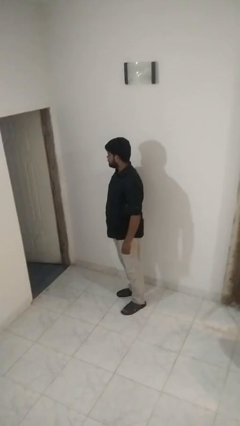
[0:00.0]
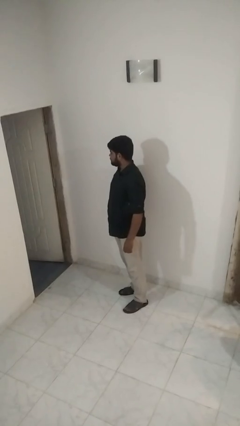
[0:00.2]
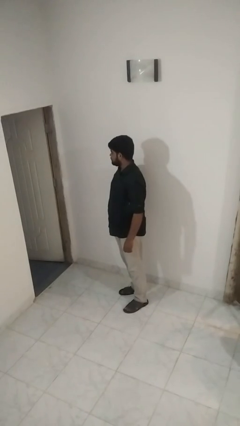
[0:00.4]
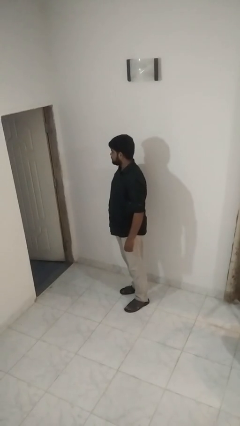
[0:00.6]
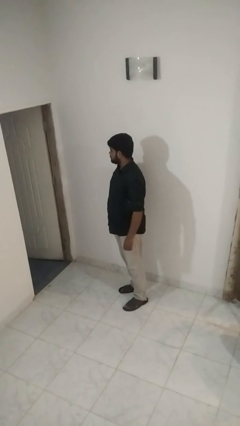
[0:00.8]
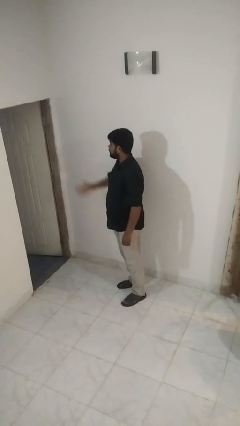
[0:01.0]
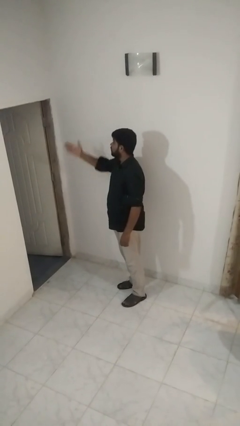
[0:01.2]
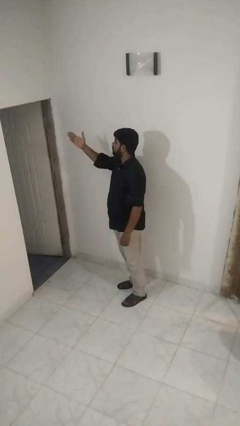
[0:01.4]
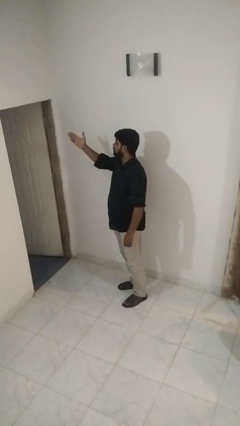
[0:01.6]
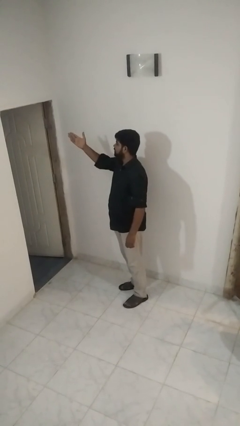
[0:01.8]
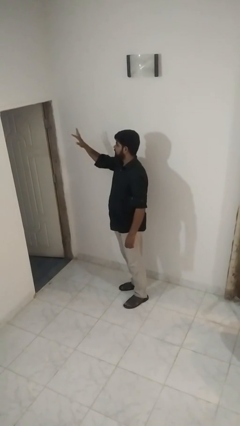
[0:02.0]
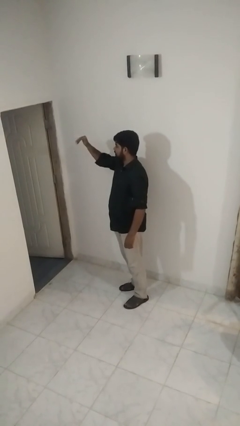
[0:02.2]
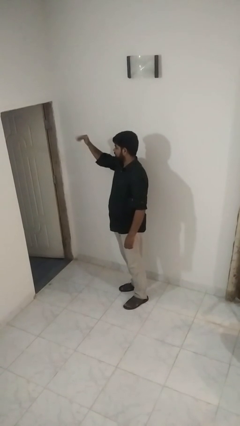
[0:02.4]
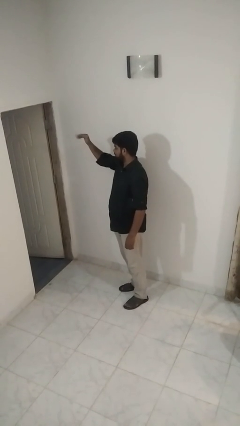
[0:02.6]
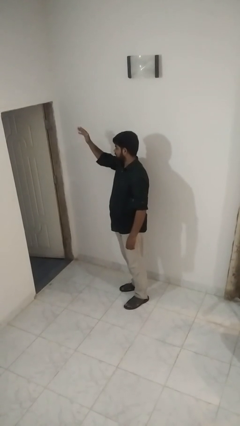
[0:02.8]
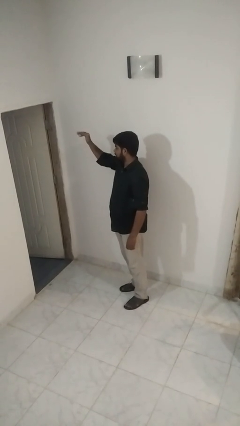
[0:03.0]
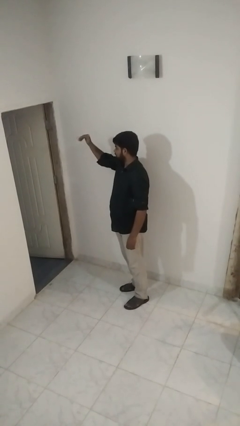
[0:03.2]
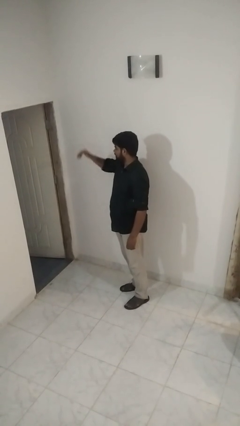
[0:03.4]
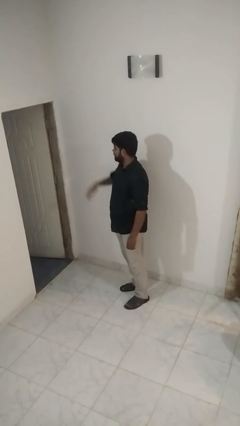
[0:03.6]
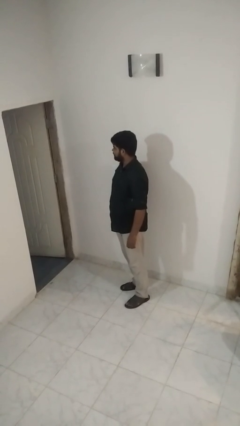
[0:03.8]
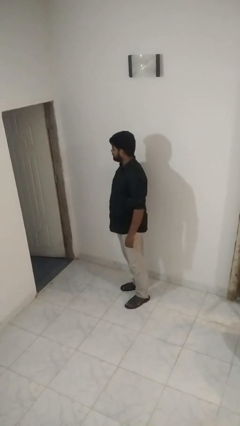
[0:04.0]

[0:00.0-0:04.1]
person gestures come here

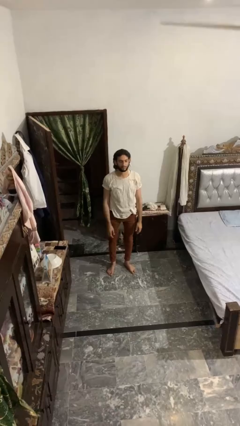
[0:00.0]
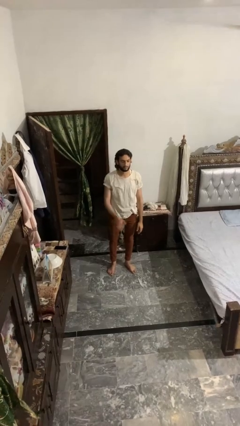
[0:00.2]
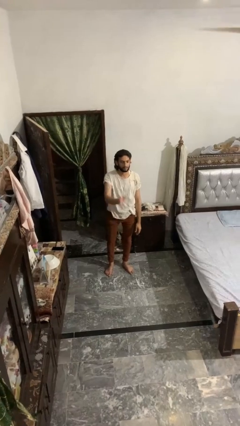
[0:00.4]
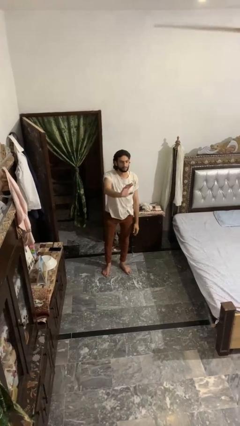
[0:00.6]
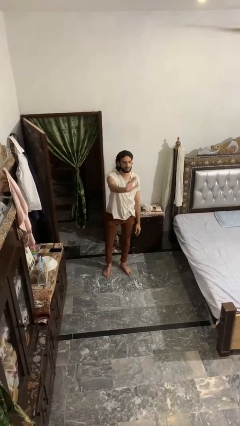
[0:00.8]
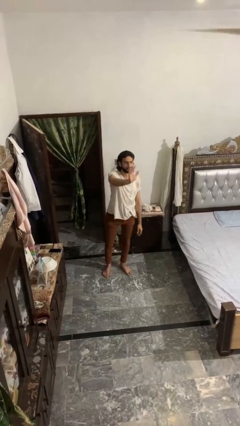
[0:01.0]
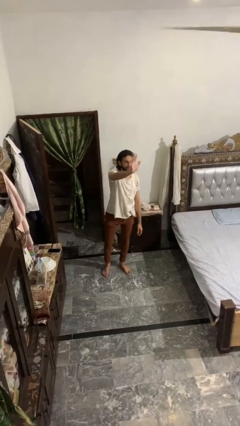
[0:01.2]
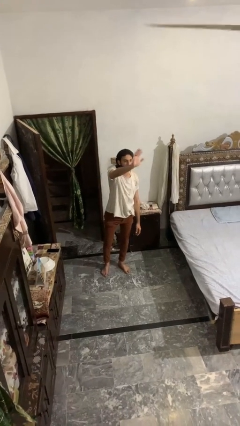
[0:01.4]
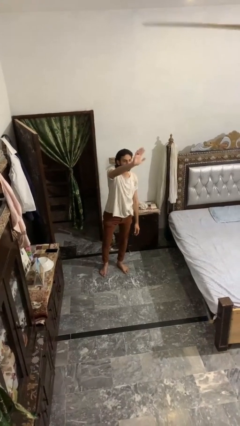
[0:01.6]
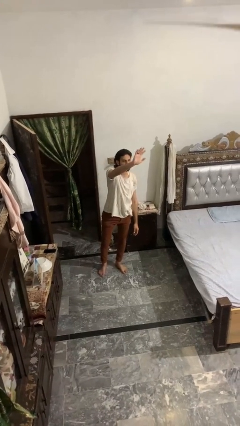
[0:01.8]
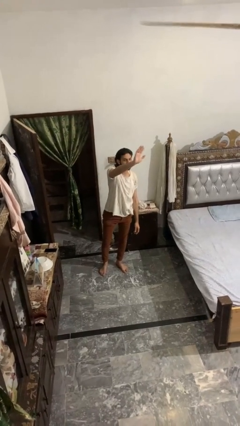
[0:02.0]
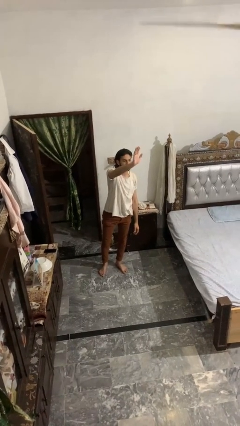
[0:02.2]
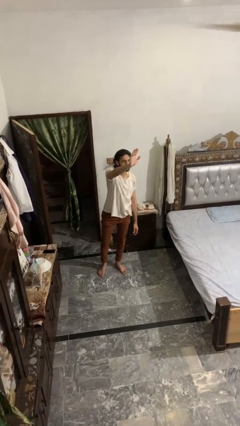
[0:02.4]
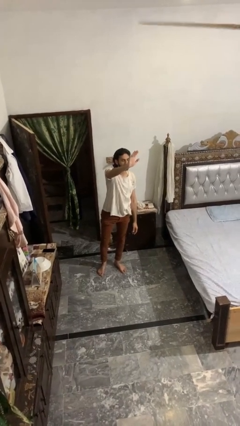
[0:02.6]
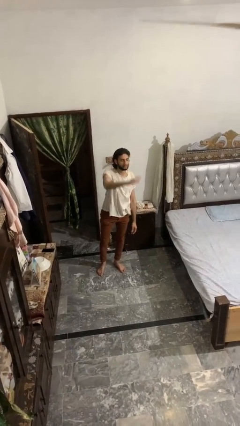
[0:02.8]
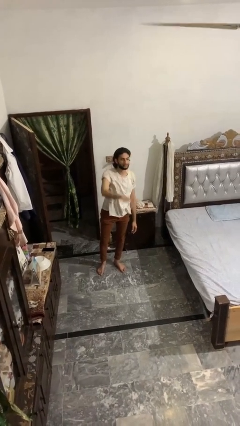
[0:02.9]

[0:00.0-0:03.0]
person waves at person

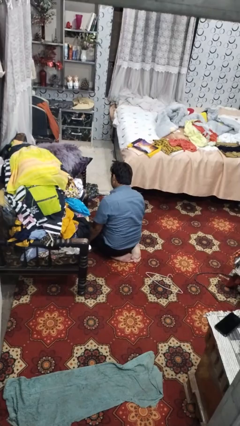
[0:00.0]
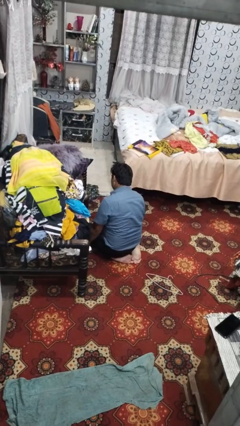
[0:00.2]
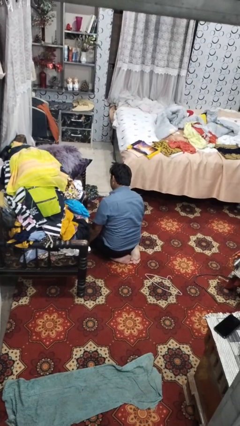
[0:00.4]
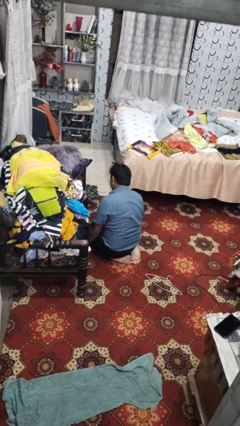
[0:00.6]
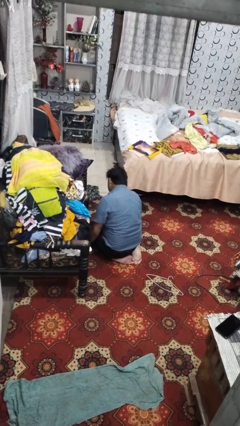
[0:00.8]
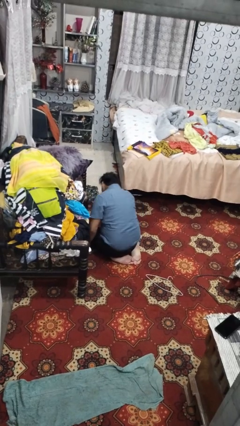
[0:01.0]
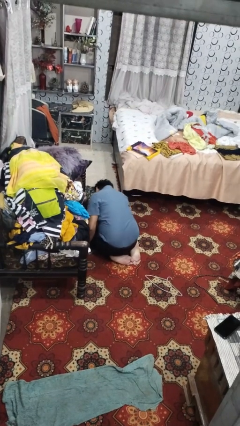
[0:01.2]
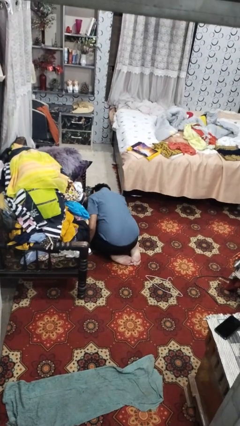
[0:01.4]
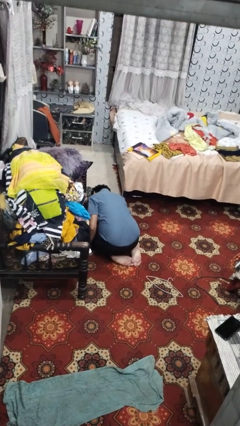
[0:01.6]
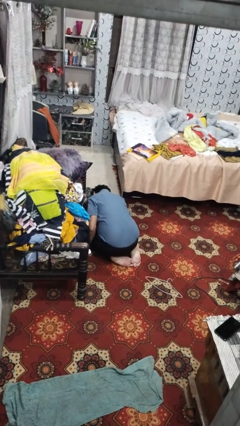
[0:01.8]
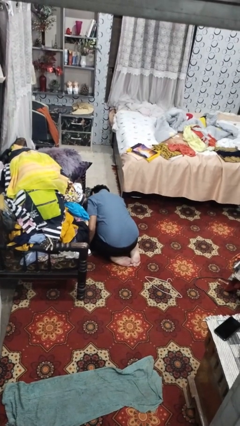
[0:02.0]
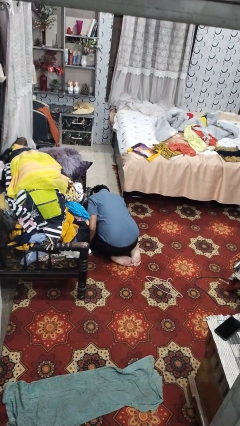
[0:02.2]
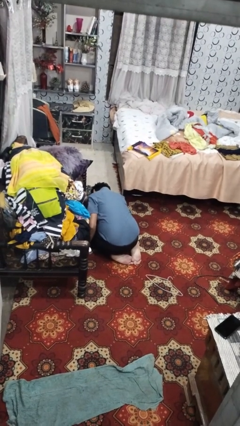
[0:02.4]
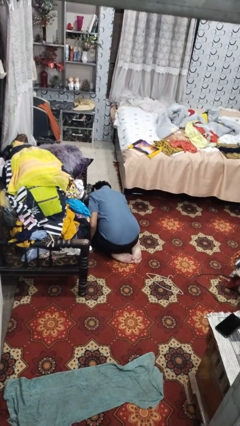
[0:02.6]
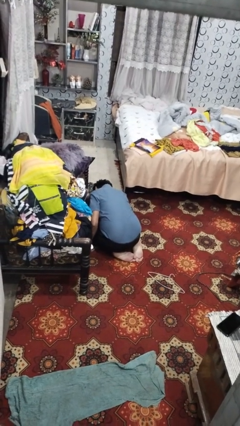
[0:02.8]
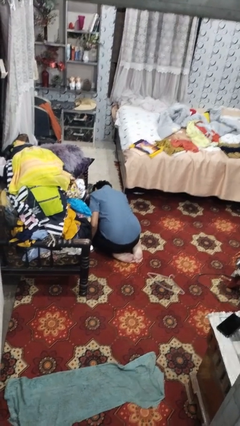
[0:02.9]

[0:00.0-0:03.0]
person searches under couch

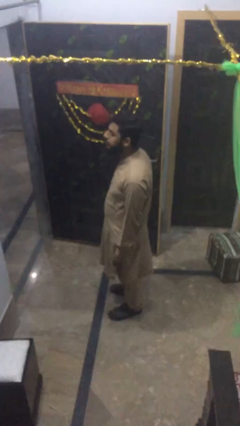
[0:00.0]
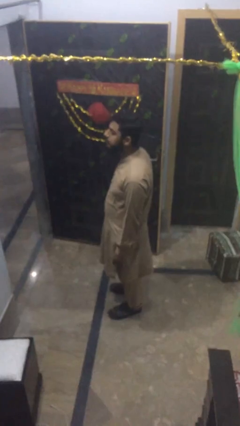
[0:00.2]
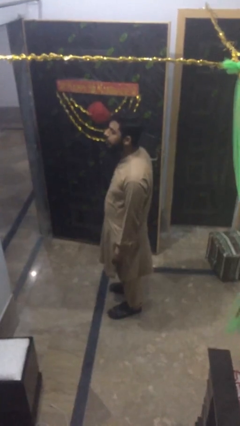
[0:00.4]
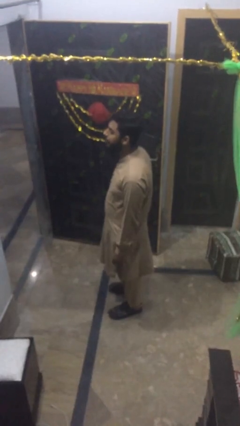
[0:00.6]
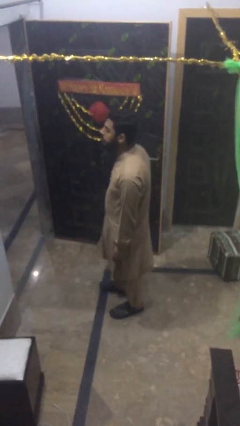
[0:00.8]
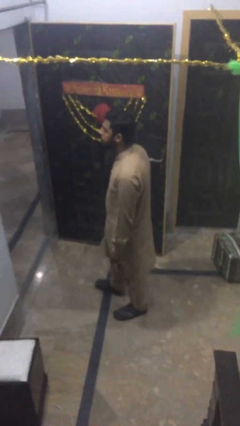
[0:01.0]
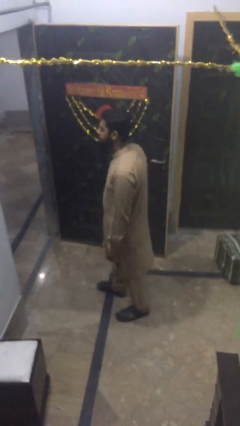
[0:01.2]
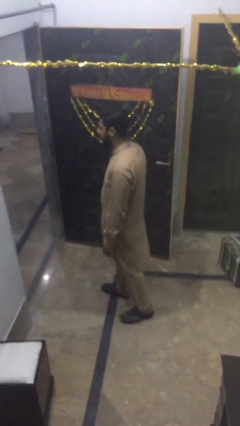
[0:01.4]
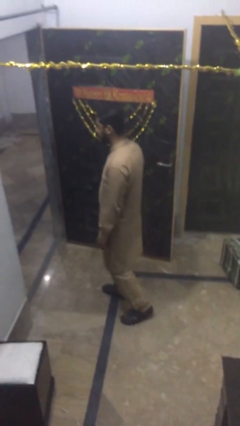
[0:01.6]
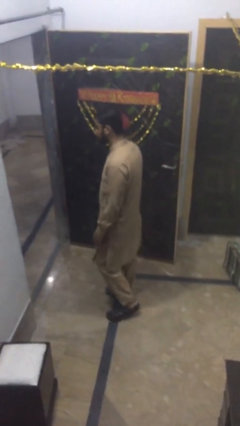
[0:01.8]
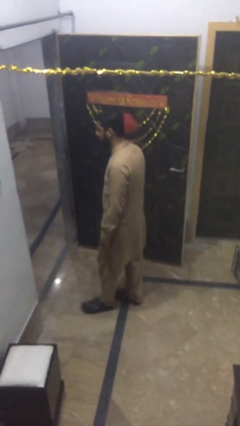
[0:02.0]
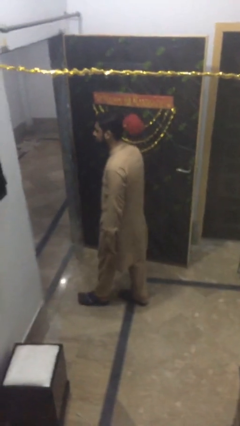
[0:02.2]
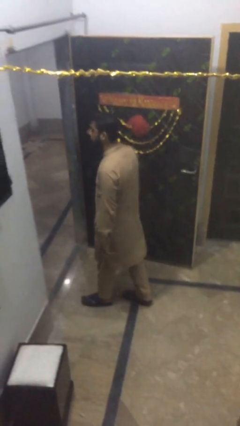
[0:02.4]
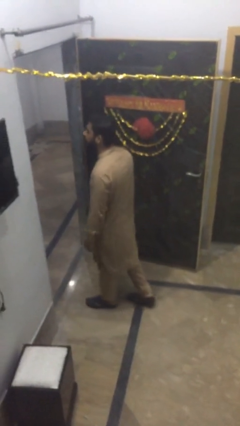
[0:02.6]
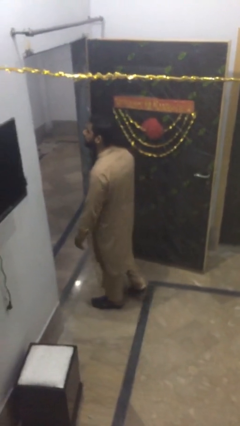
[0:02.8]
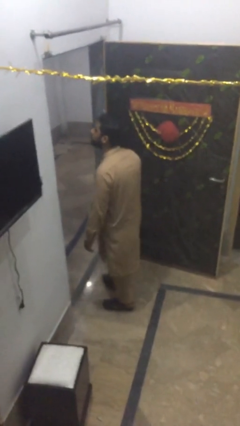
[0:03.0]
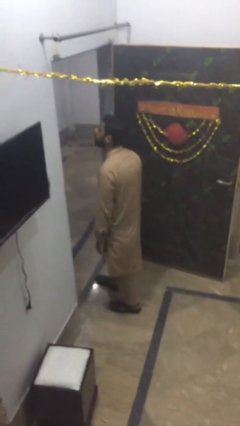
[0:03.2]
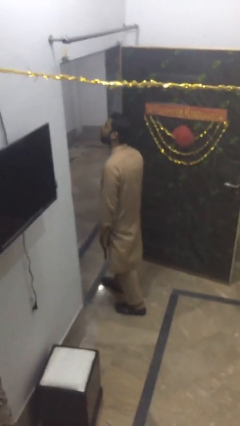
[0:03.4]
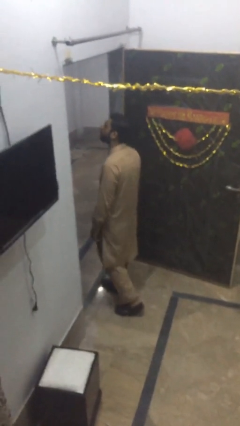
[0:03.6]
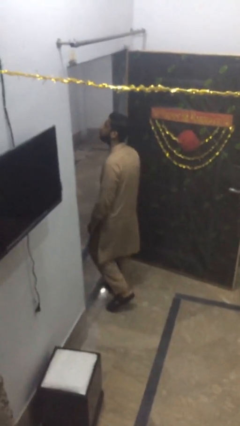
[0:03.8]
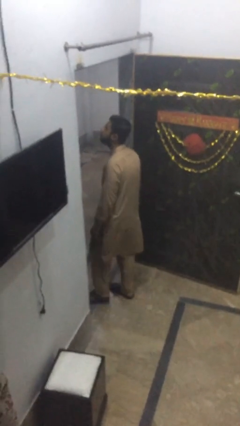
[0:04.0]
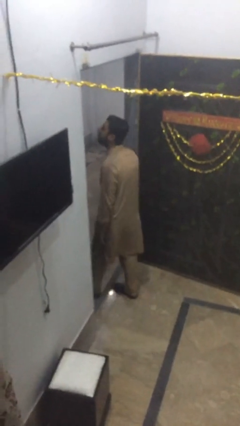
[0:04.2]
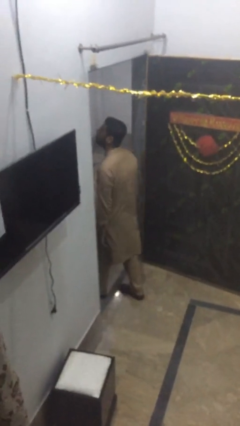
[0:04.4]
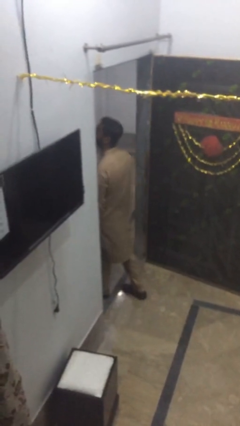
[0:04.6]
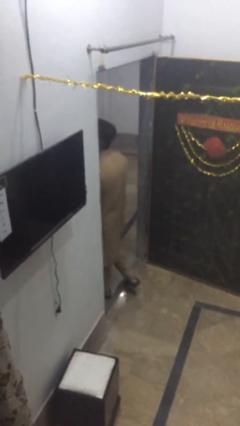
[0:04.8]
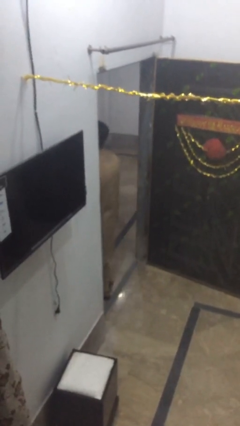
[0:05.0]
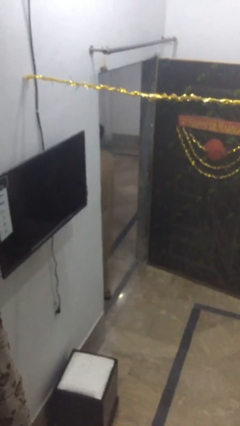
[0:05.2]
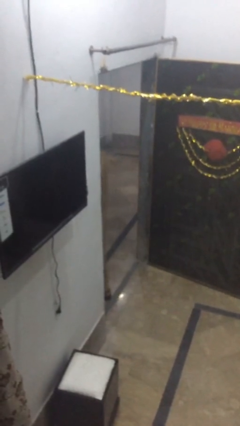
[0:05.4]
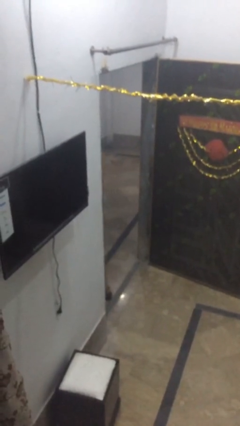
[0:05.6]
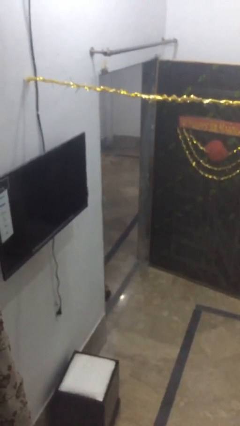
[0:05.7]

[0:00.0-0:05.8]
person exits scene through structure

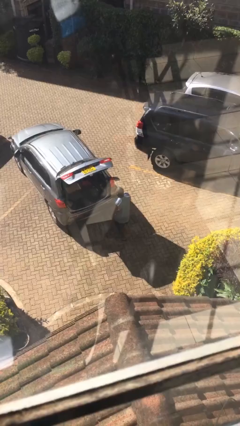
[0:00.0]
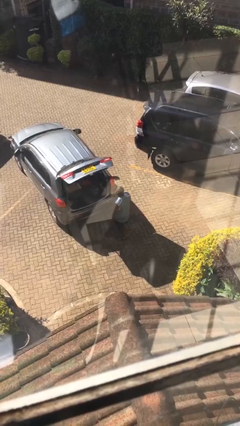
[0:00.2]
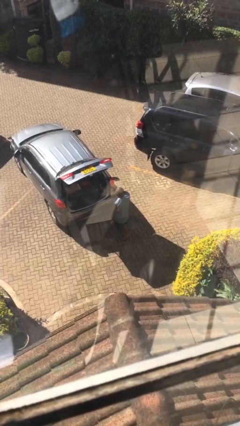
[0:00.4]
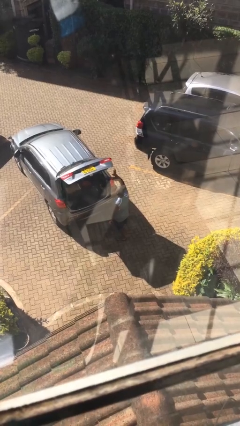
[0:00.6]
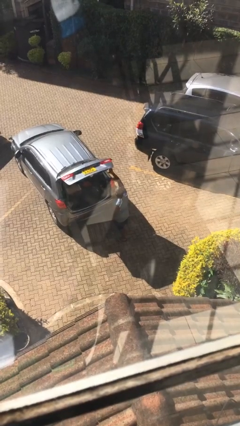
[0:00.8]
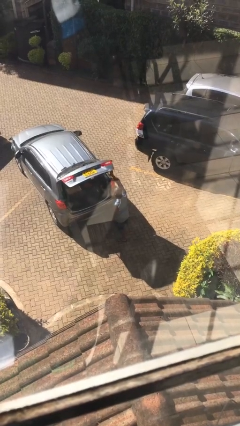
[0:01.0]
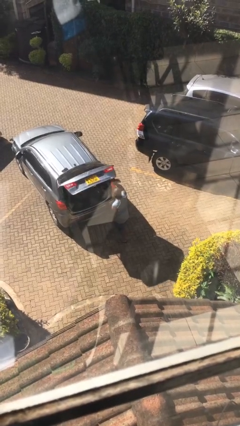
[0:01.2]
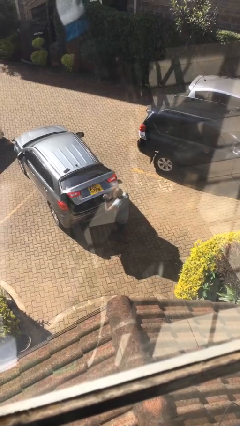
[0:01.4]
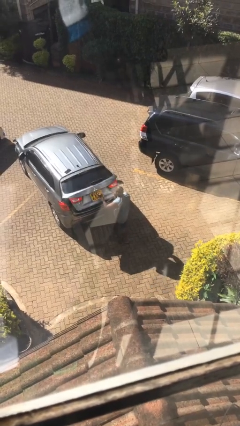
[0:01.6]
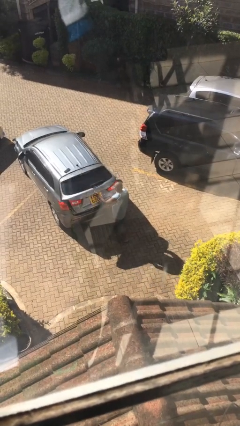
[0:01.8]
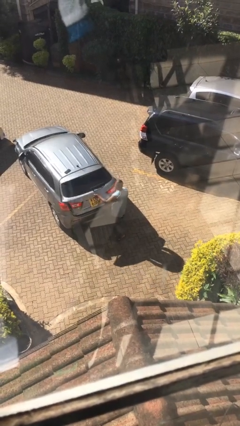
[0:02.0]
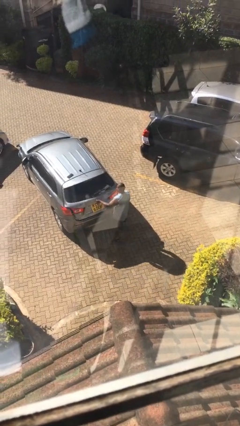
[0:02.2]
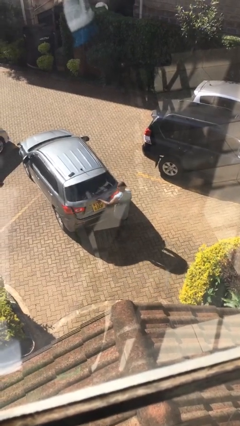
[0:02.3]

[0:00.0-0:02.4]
person closes car trunk
